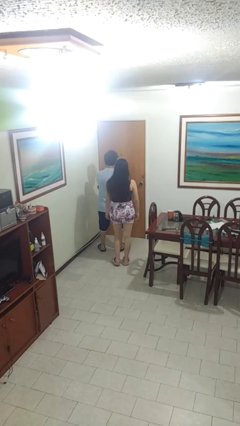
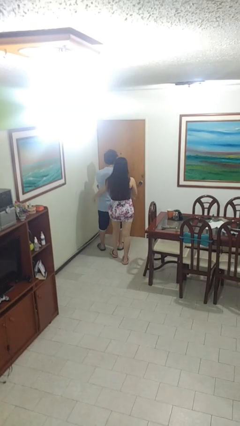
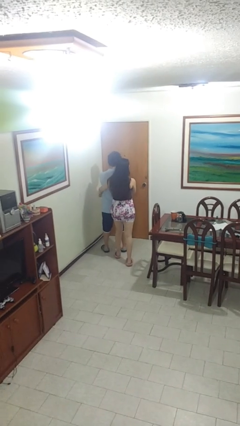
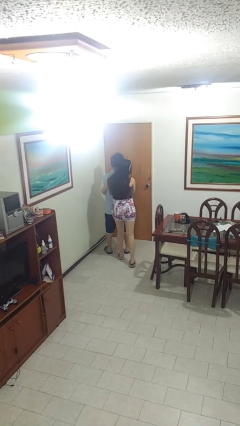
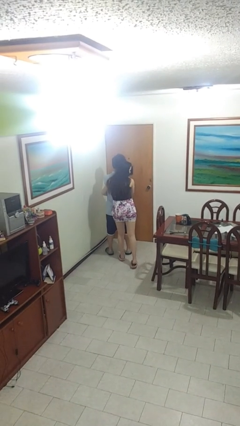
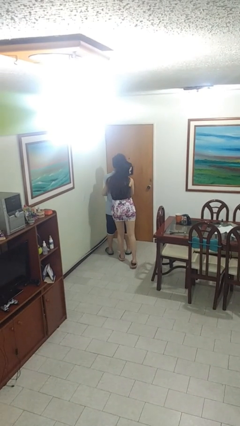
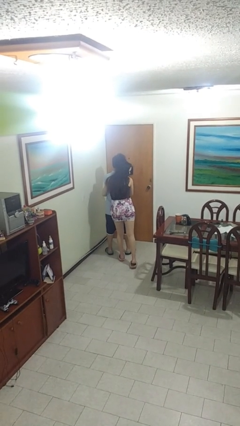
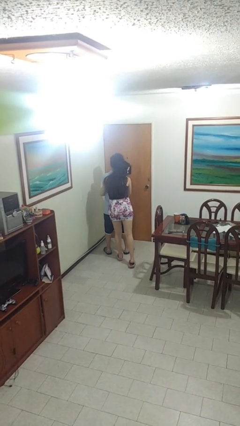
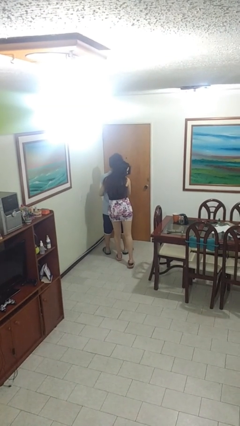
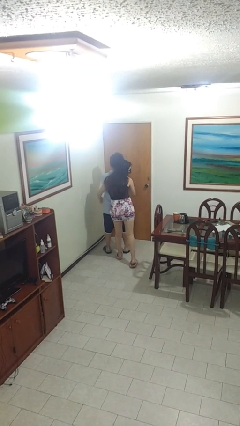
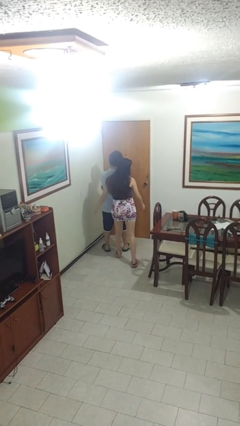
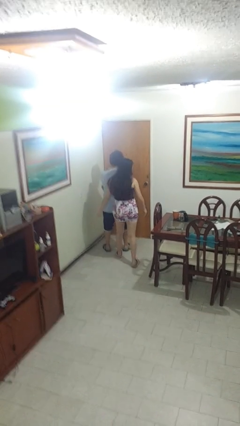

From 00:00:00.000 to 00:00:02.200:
person hugs person from behind

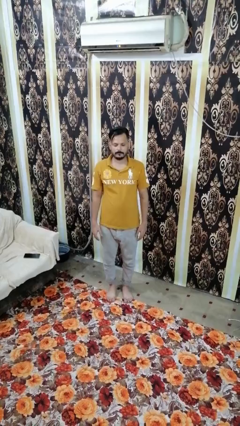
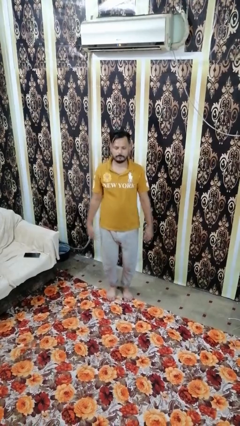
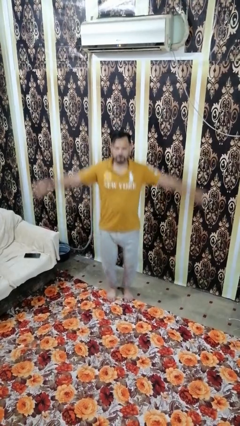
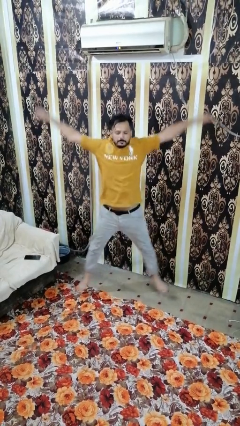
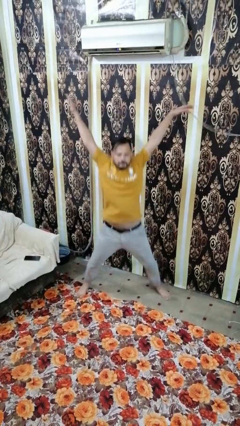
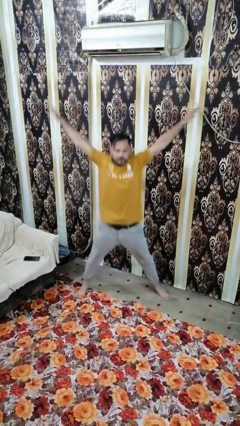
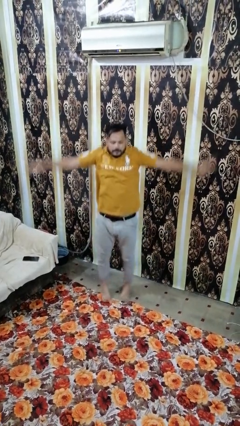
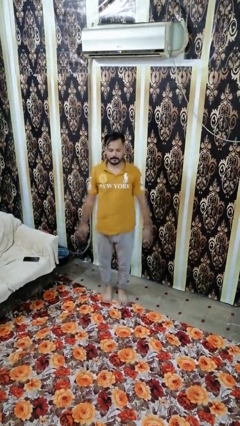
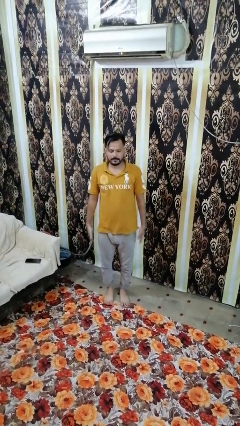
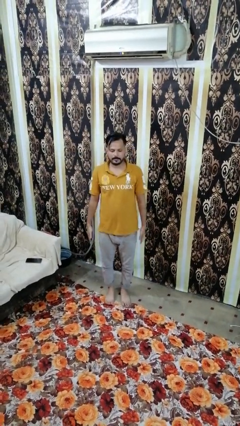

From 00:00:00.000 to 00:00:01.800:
person exercises with jumping jacks

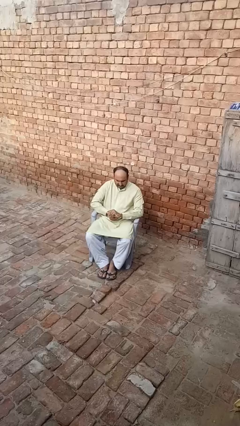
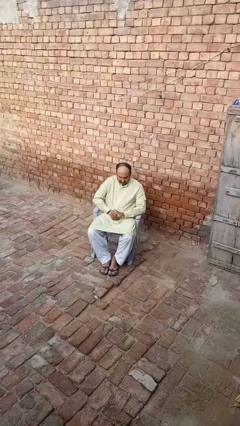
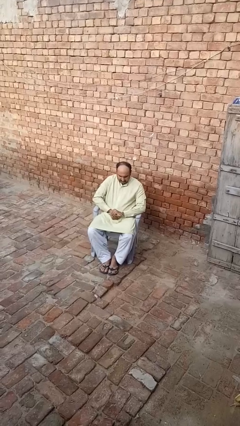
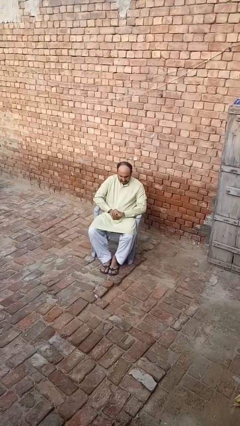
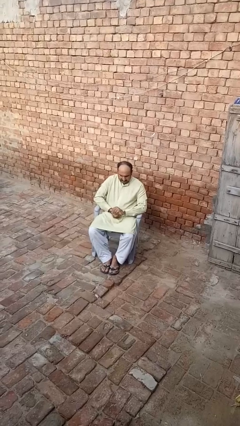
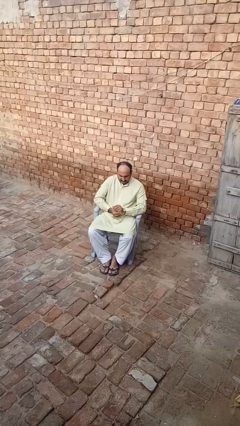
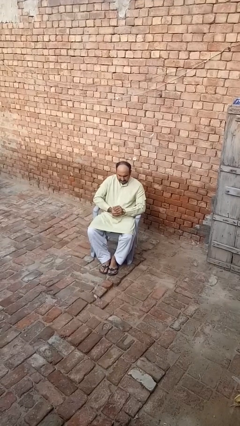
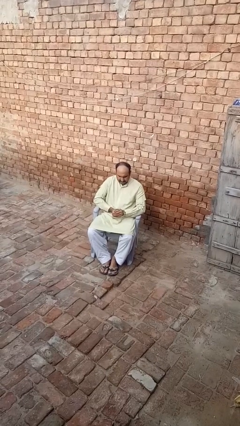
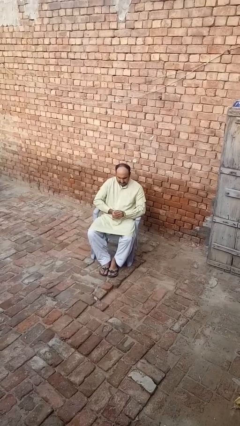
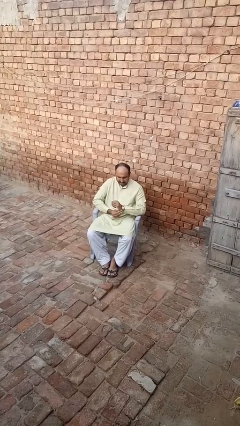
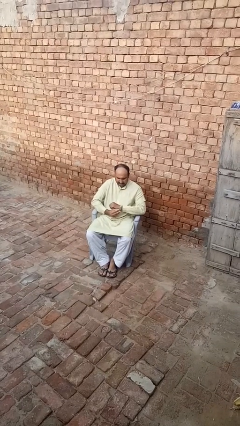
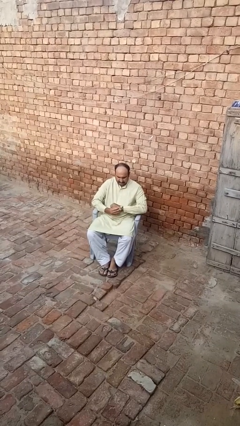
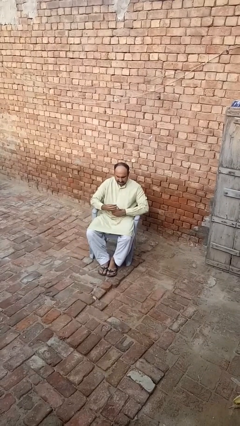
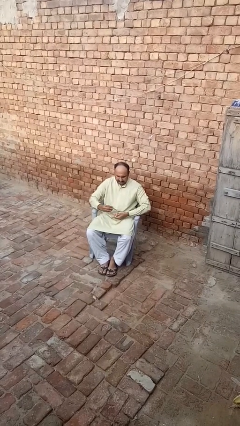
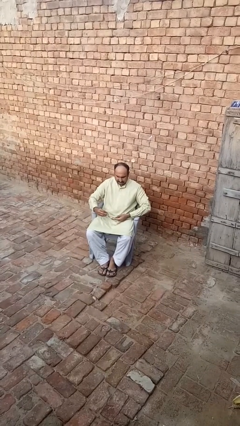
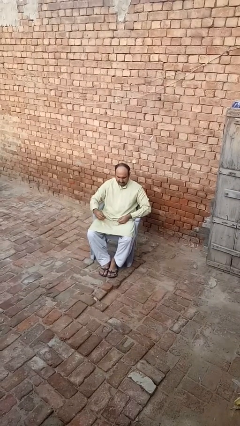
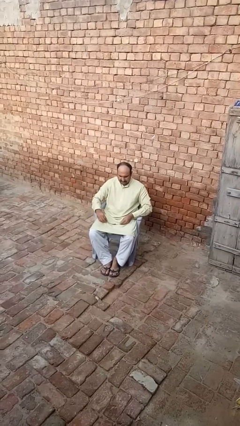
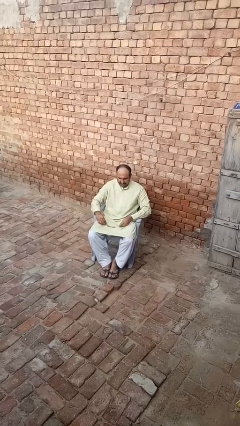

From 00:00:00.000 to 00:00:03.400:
person takes off wristwatch

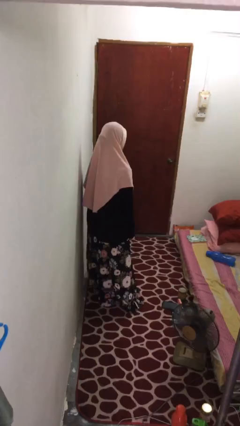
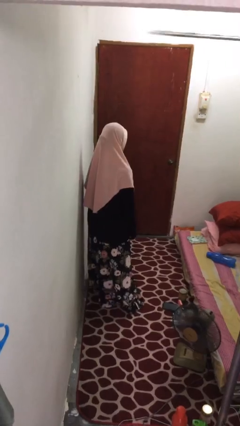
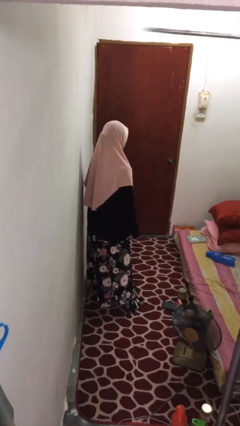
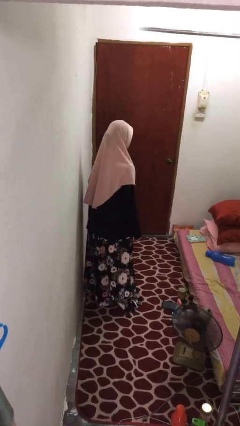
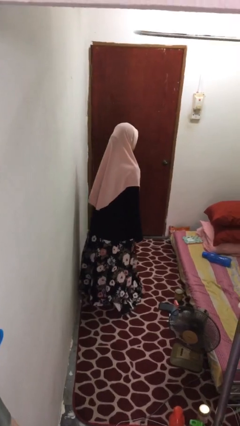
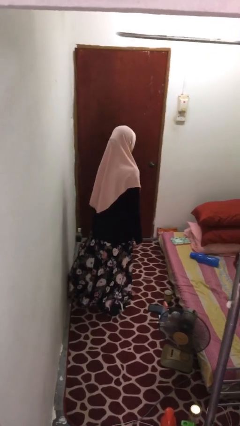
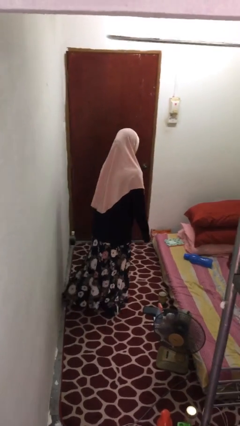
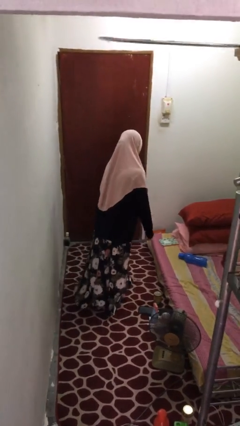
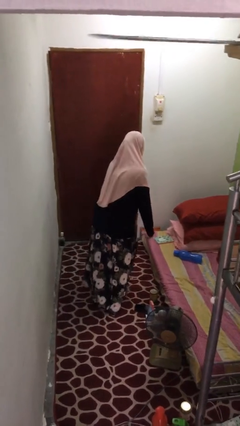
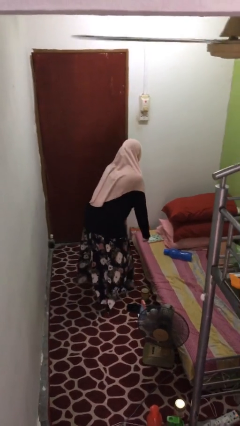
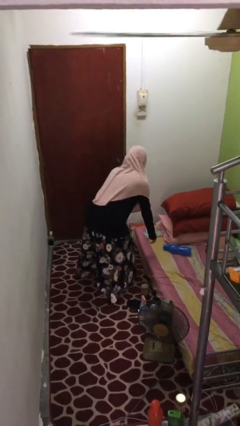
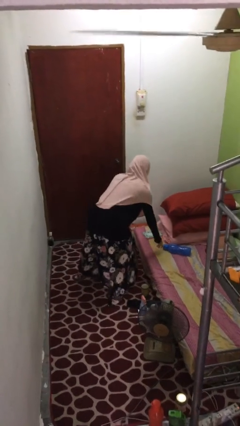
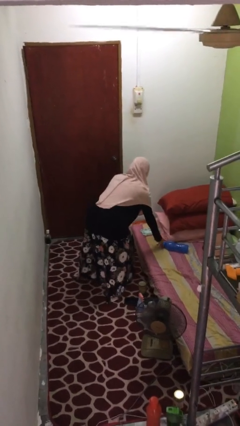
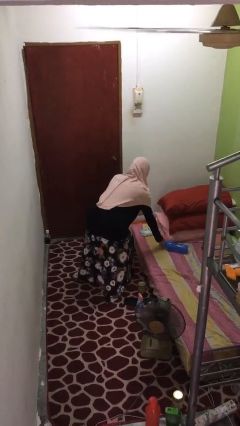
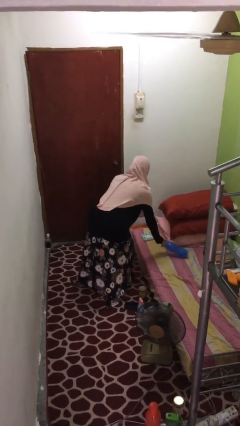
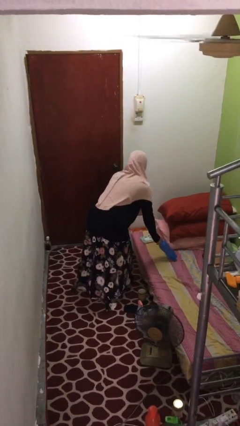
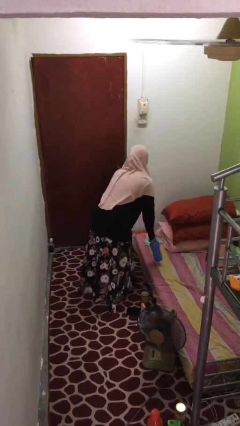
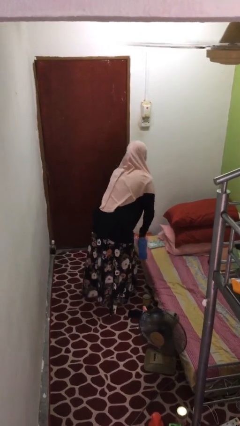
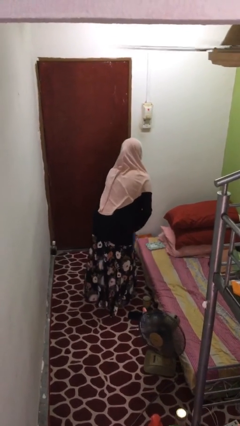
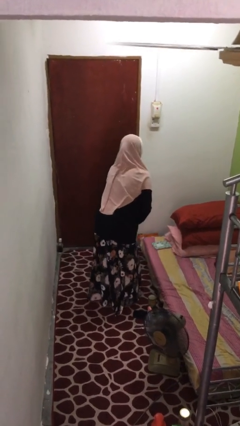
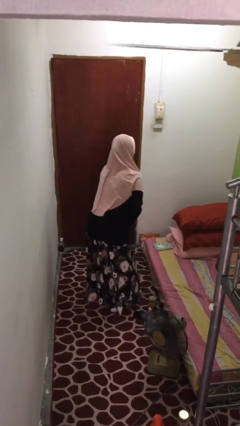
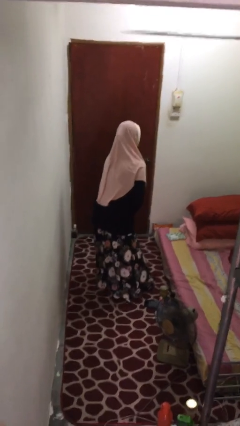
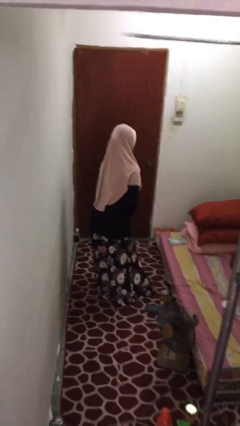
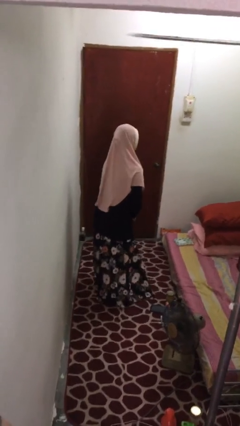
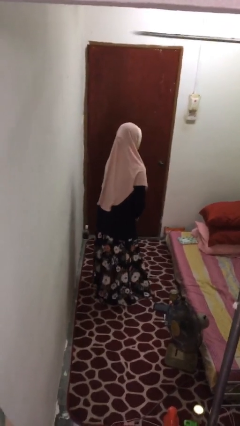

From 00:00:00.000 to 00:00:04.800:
person picks up object from bed

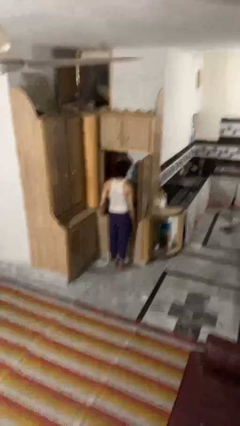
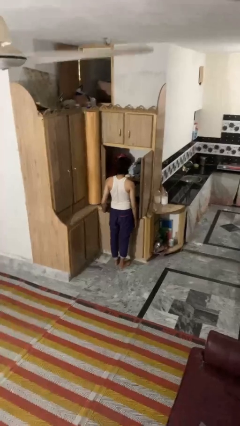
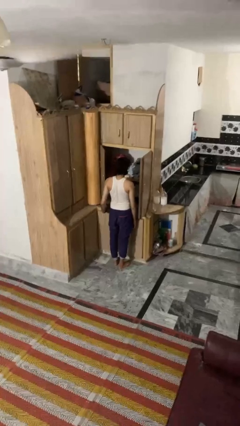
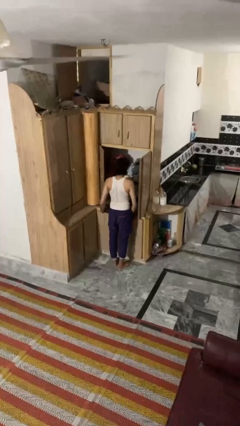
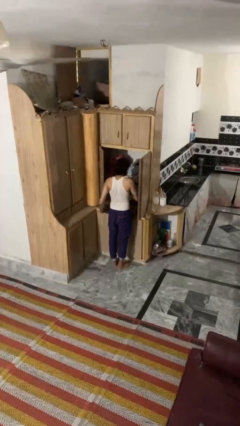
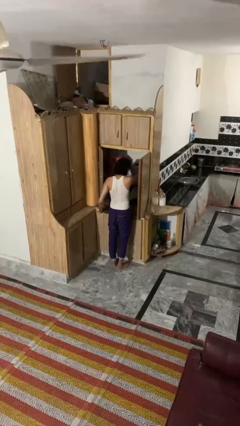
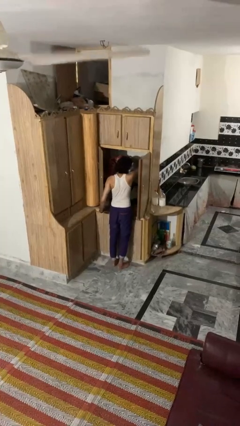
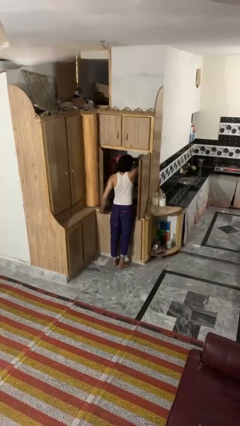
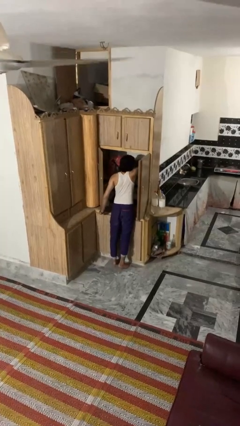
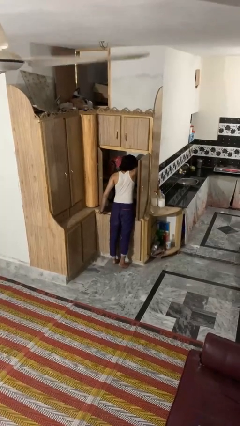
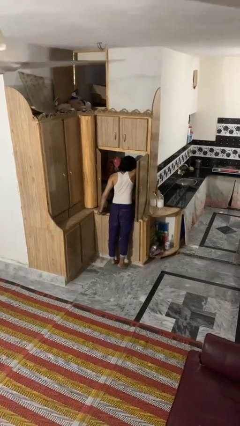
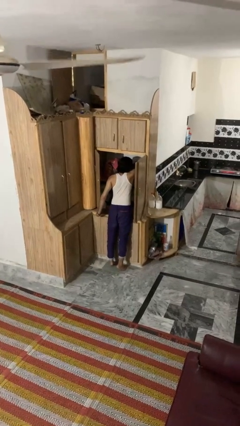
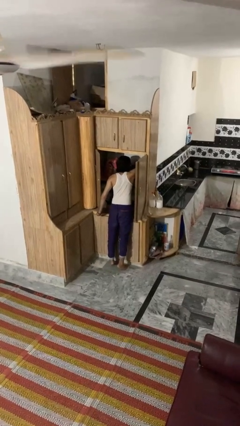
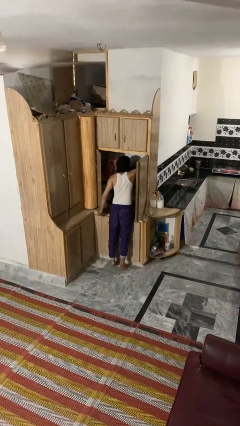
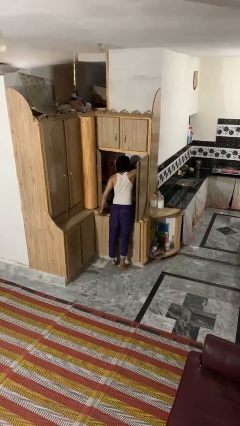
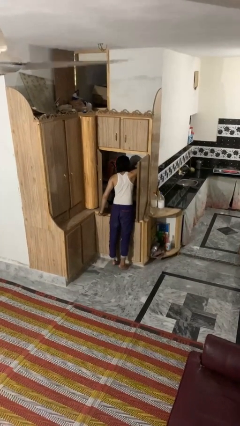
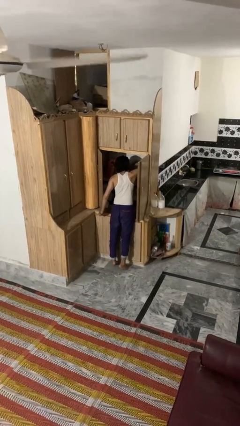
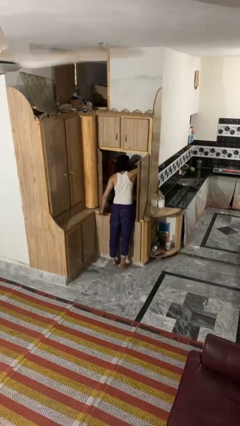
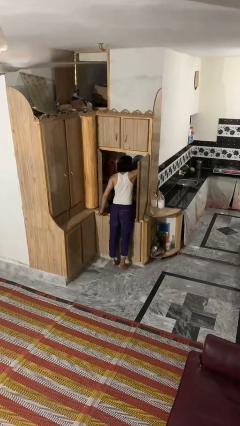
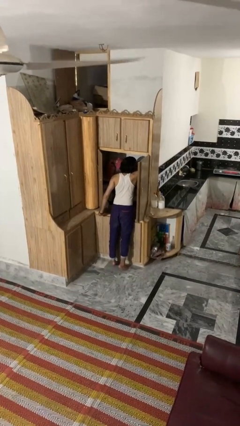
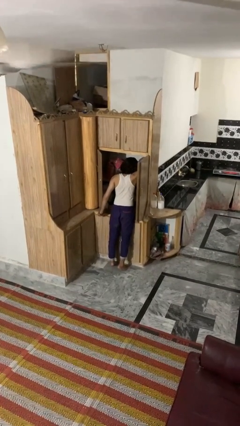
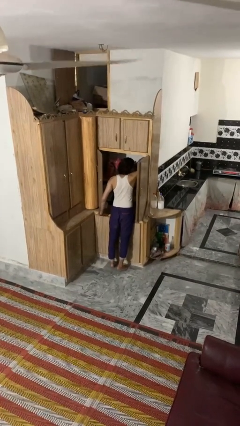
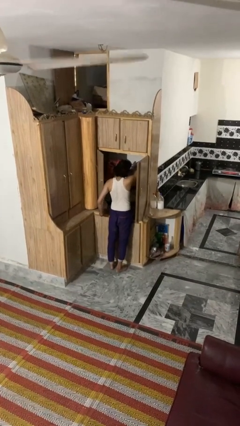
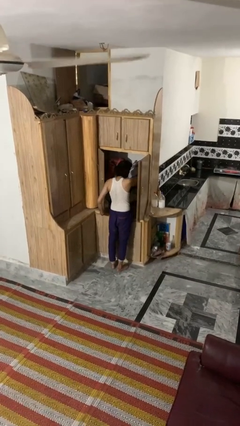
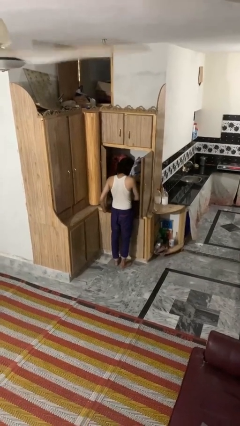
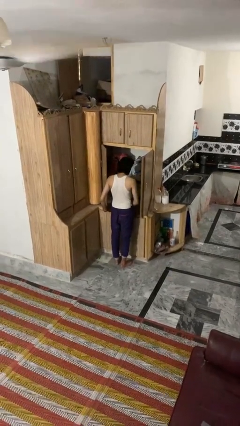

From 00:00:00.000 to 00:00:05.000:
person searches in cabinet
